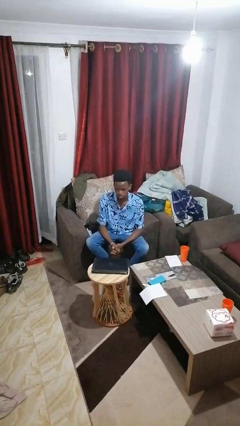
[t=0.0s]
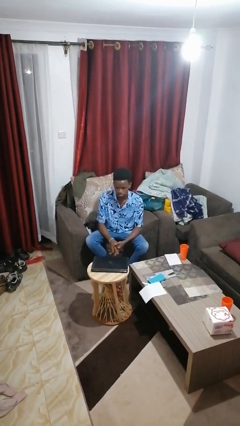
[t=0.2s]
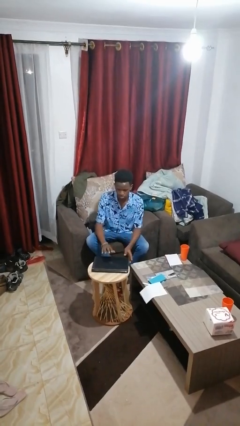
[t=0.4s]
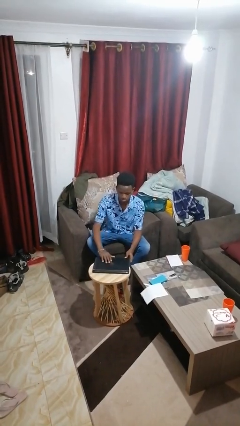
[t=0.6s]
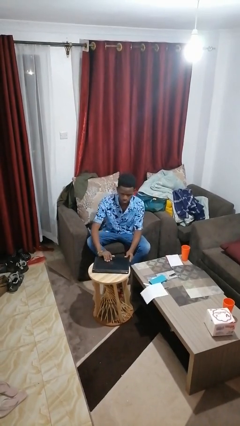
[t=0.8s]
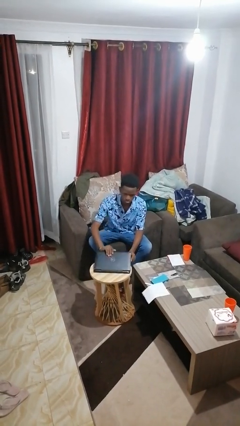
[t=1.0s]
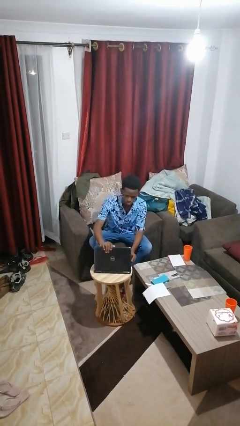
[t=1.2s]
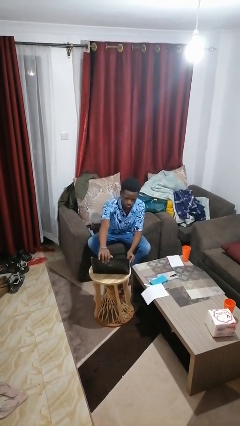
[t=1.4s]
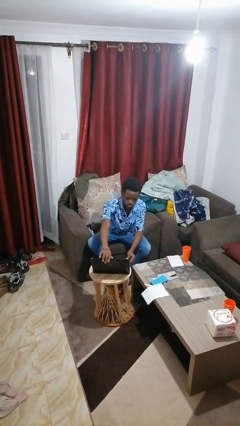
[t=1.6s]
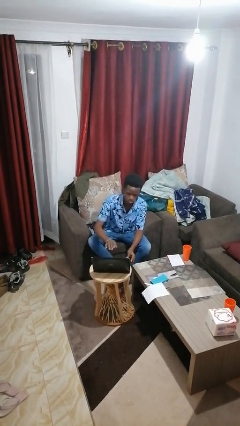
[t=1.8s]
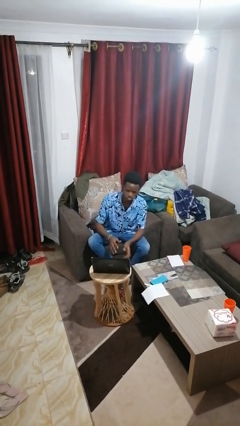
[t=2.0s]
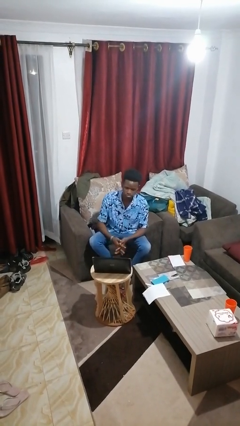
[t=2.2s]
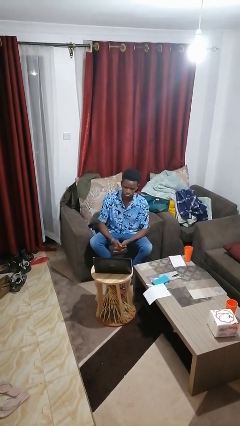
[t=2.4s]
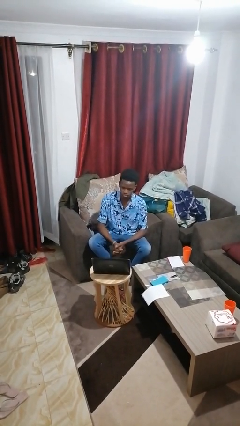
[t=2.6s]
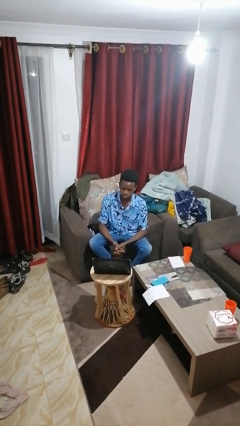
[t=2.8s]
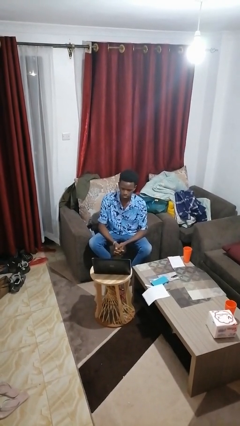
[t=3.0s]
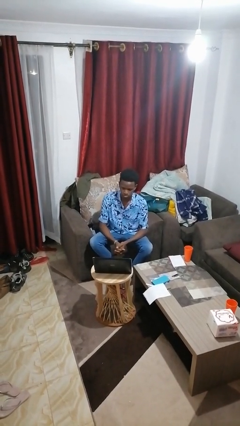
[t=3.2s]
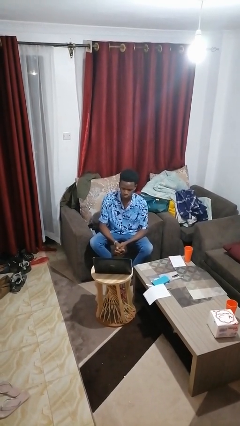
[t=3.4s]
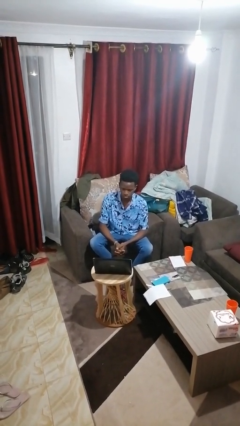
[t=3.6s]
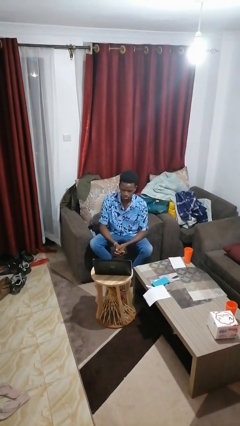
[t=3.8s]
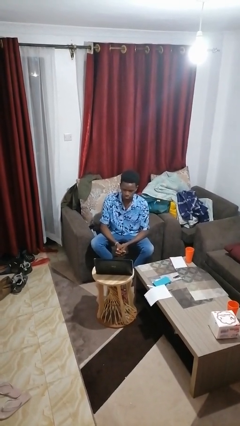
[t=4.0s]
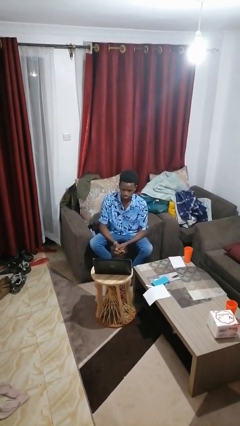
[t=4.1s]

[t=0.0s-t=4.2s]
person opens laptop

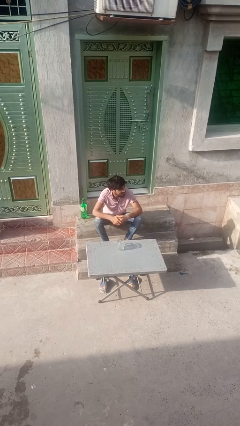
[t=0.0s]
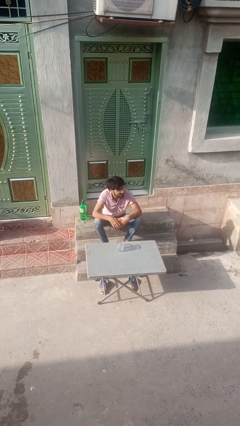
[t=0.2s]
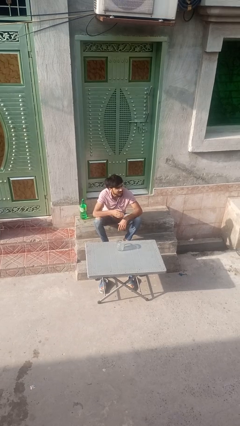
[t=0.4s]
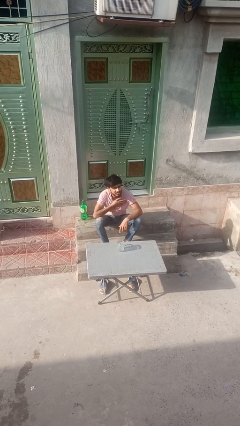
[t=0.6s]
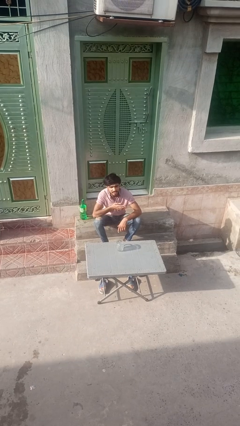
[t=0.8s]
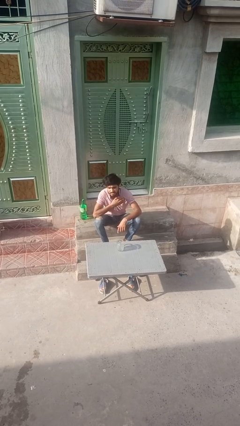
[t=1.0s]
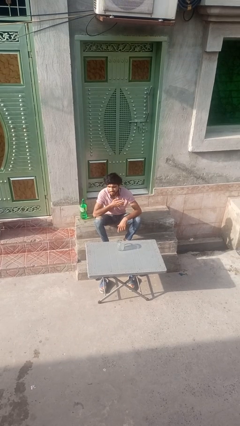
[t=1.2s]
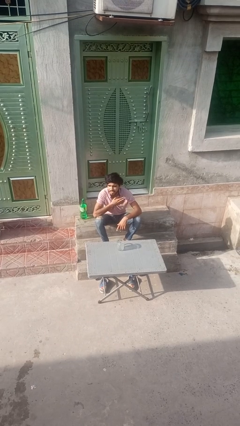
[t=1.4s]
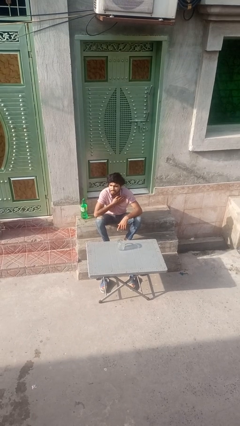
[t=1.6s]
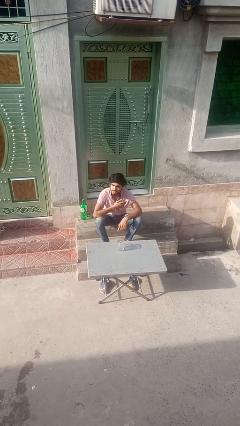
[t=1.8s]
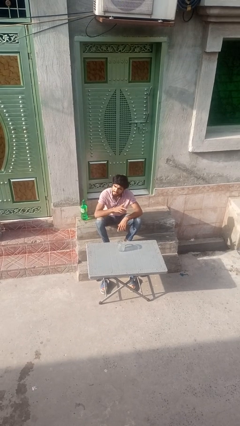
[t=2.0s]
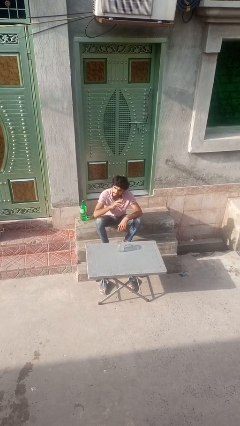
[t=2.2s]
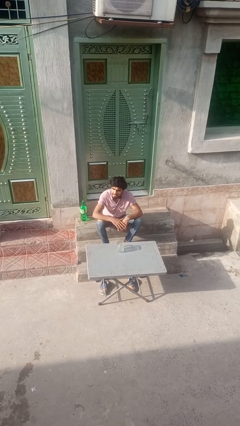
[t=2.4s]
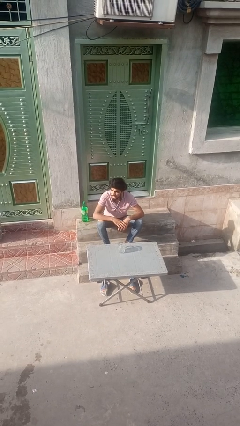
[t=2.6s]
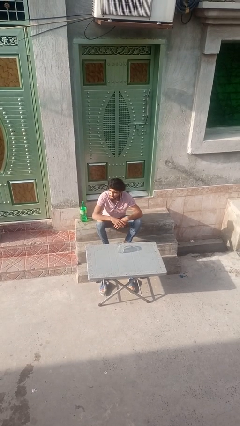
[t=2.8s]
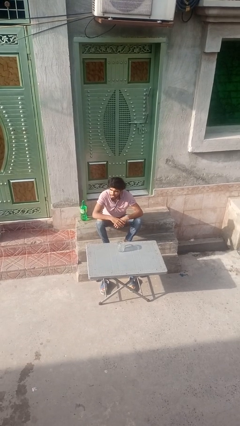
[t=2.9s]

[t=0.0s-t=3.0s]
person drums on chest

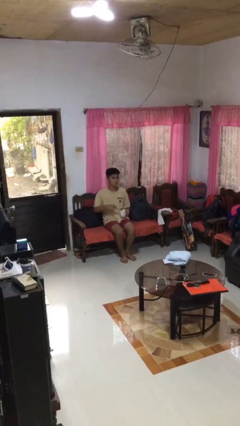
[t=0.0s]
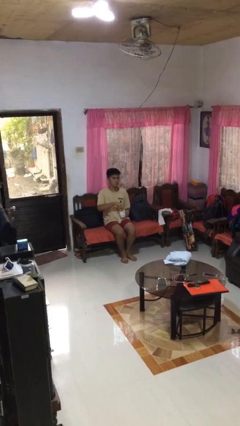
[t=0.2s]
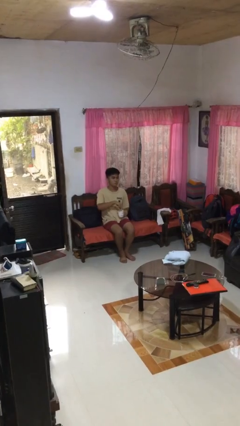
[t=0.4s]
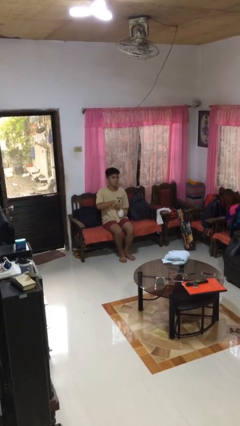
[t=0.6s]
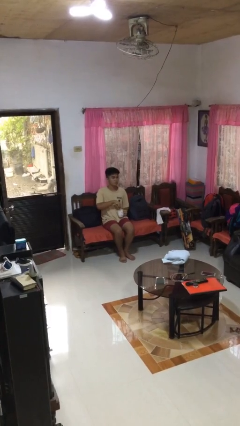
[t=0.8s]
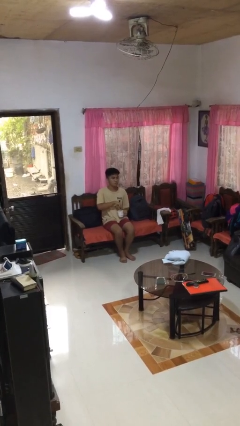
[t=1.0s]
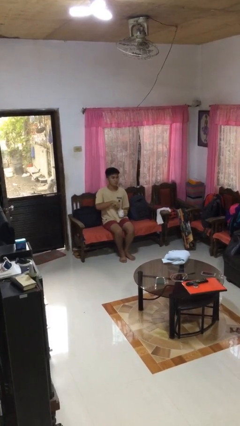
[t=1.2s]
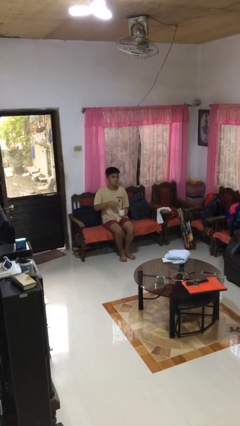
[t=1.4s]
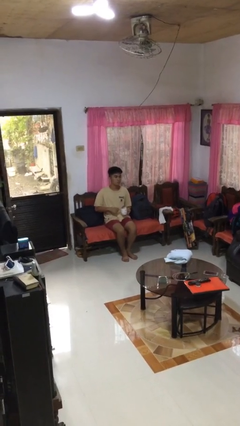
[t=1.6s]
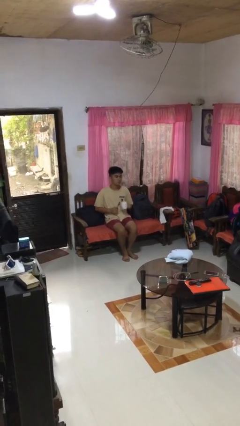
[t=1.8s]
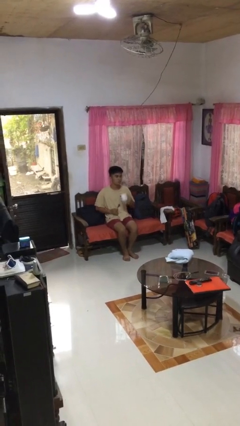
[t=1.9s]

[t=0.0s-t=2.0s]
person stirs mug

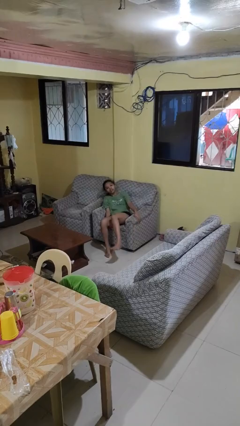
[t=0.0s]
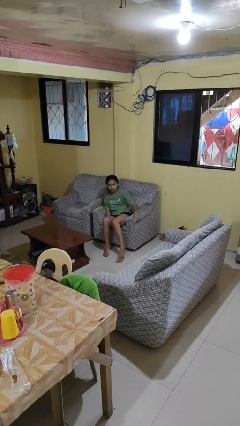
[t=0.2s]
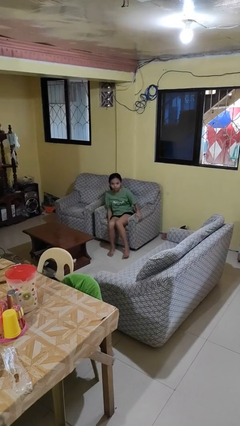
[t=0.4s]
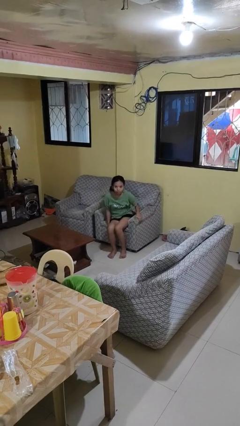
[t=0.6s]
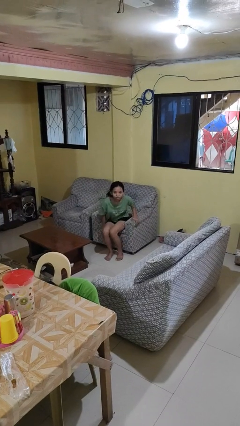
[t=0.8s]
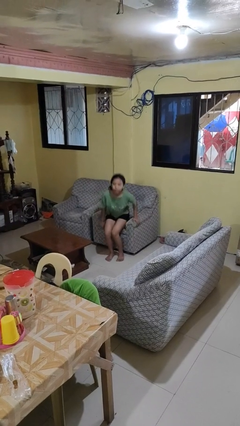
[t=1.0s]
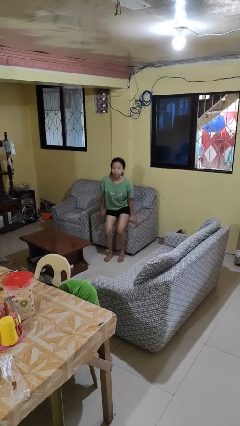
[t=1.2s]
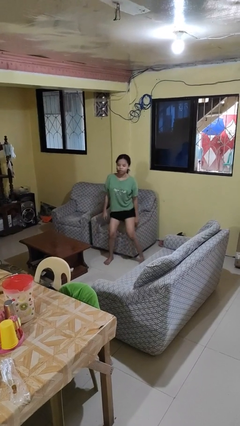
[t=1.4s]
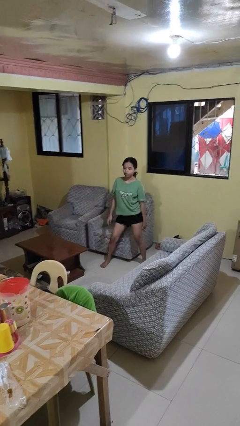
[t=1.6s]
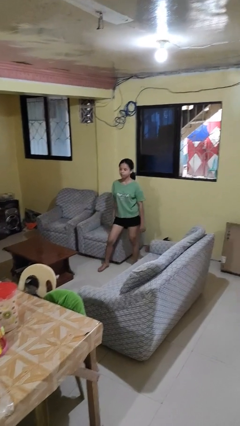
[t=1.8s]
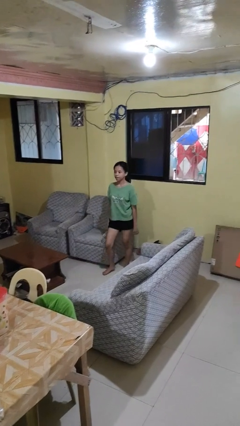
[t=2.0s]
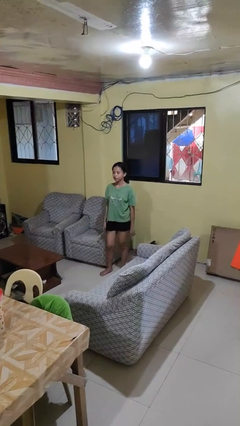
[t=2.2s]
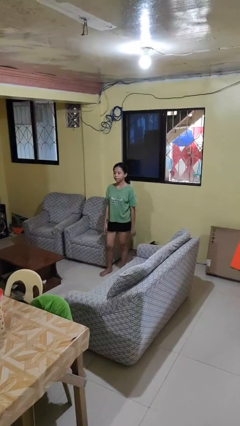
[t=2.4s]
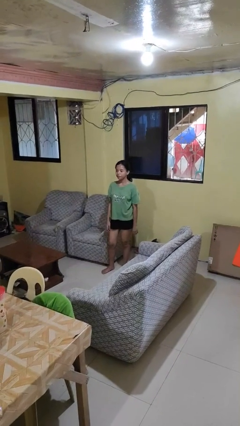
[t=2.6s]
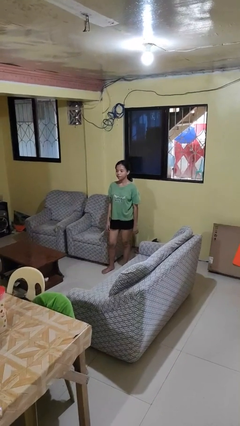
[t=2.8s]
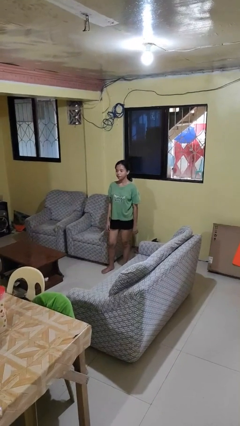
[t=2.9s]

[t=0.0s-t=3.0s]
person stands up

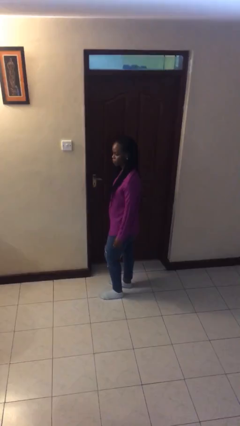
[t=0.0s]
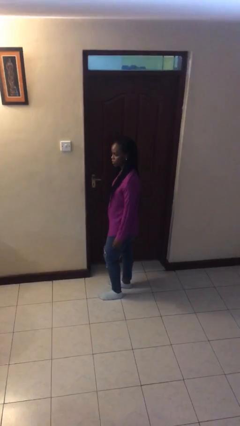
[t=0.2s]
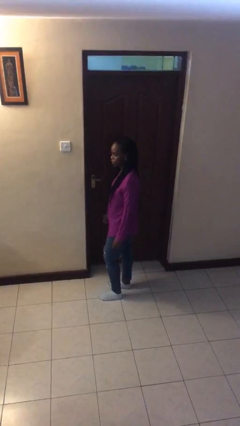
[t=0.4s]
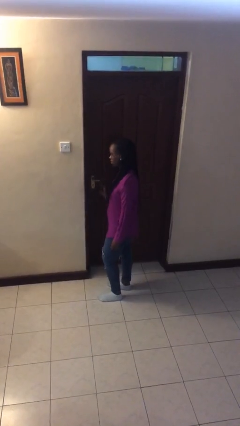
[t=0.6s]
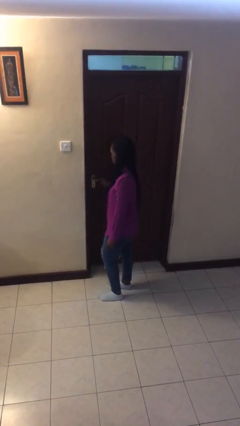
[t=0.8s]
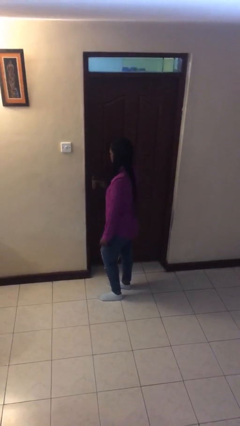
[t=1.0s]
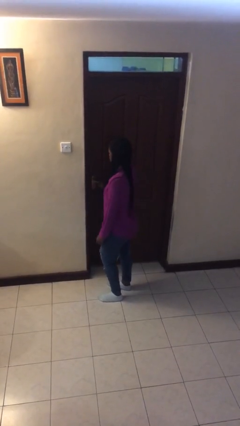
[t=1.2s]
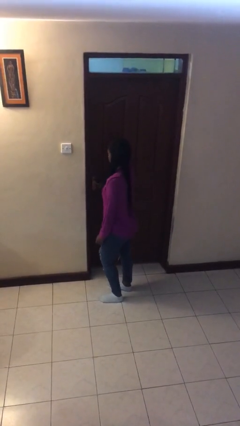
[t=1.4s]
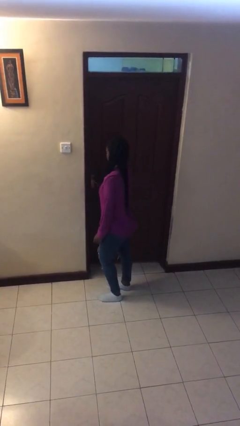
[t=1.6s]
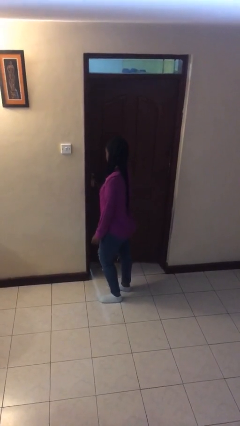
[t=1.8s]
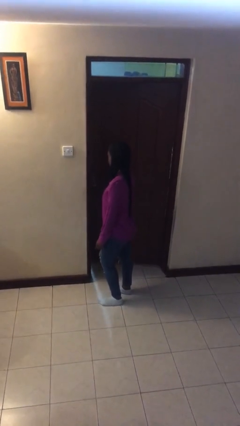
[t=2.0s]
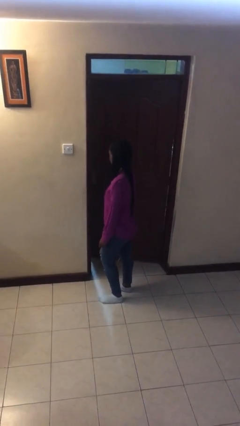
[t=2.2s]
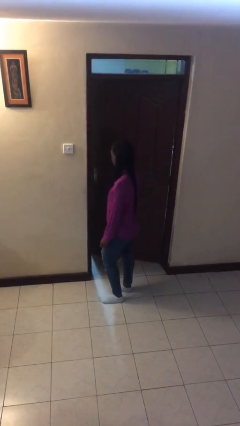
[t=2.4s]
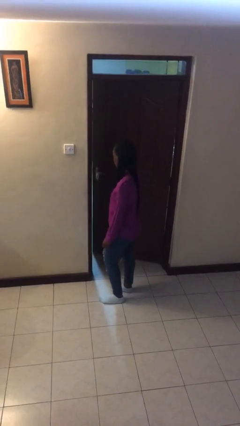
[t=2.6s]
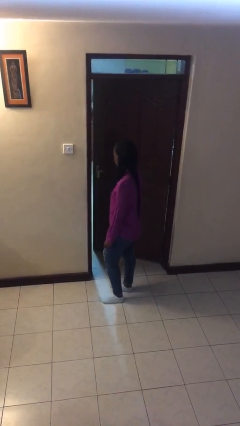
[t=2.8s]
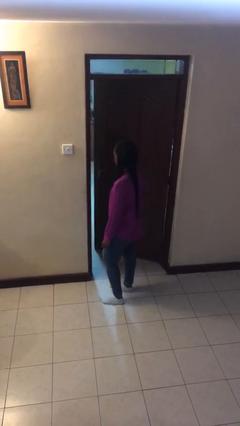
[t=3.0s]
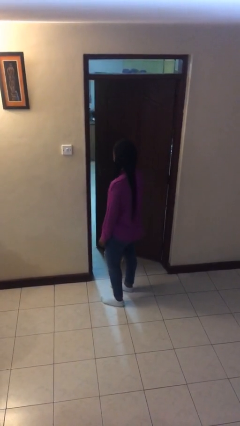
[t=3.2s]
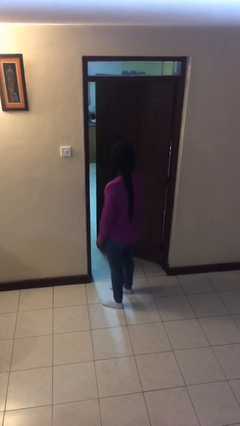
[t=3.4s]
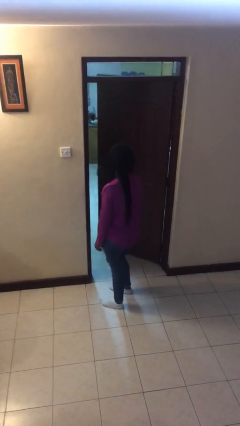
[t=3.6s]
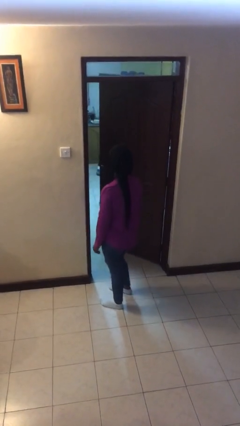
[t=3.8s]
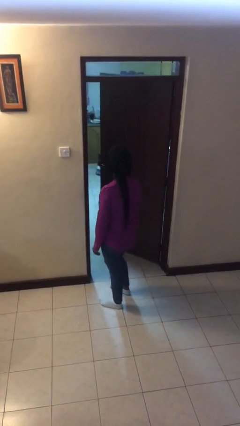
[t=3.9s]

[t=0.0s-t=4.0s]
person opens facility door

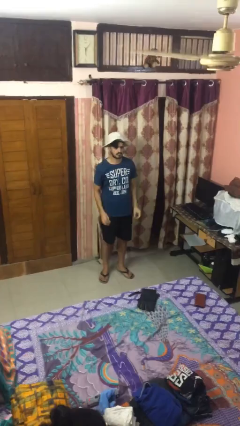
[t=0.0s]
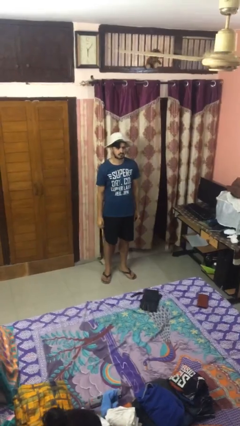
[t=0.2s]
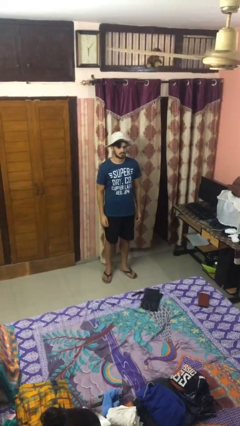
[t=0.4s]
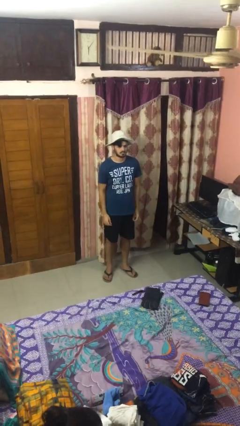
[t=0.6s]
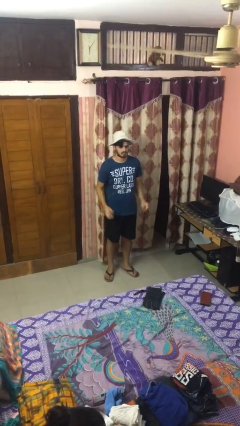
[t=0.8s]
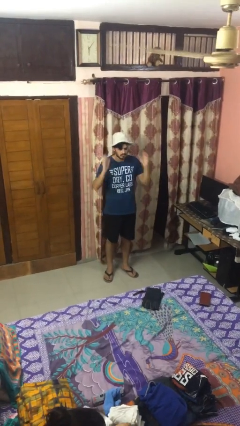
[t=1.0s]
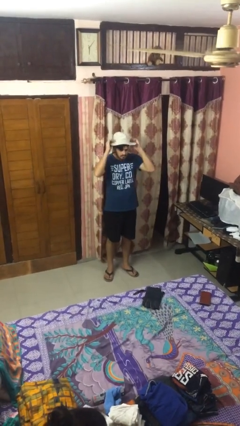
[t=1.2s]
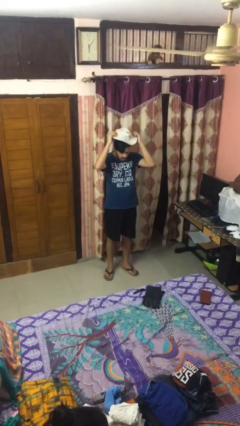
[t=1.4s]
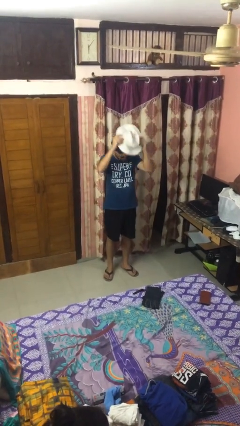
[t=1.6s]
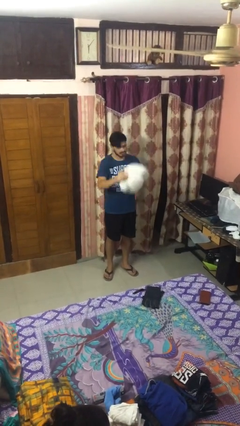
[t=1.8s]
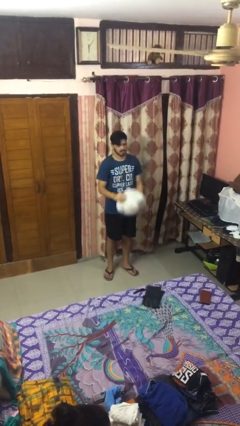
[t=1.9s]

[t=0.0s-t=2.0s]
person takes off hat
